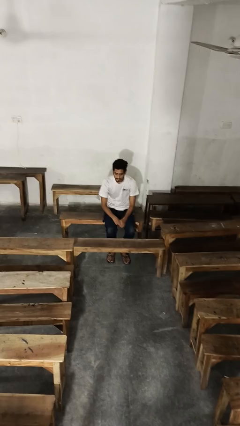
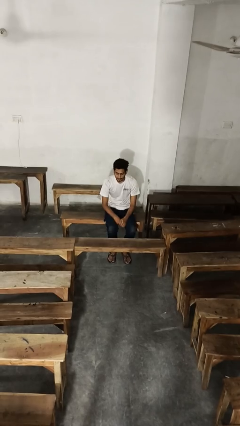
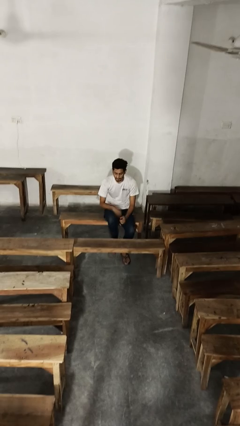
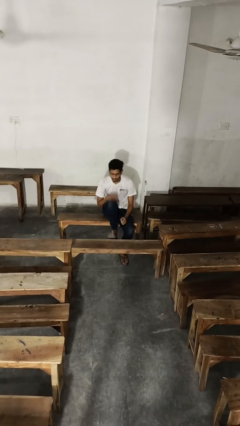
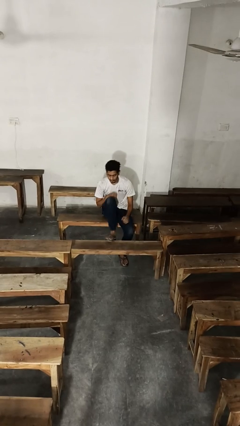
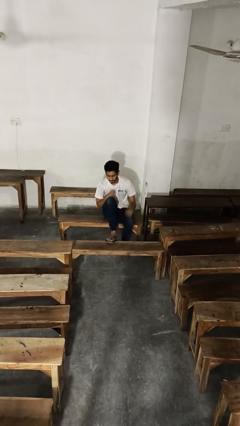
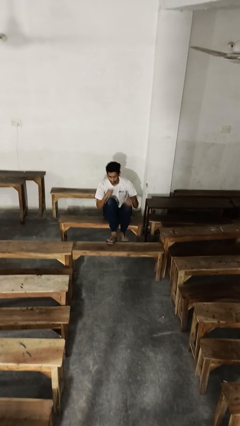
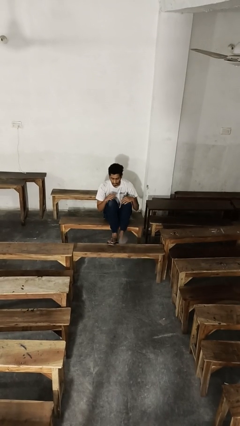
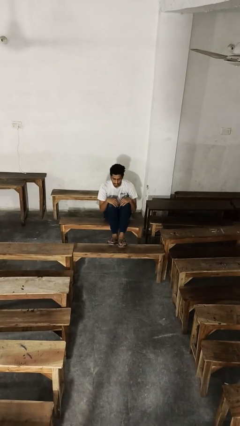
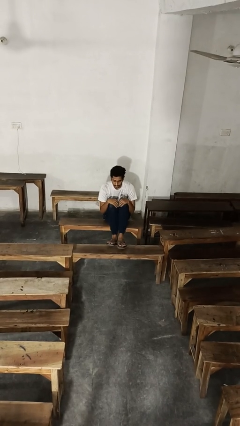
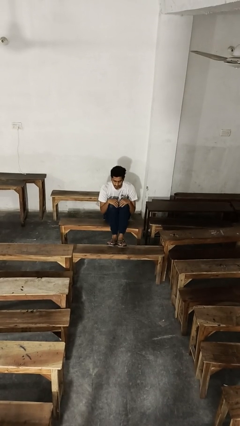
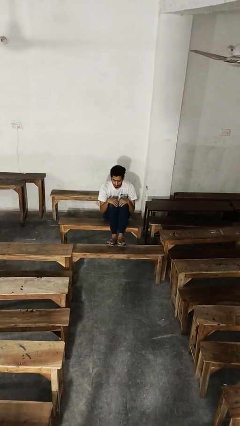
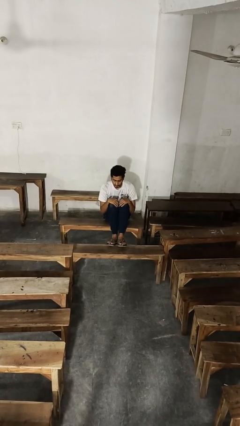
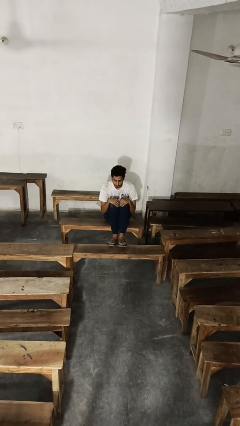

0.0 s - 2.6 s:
person puts feet up

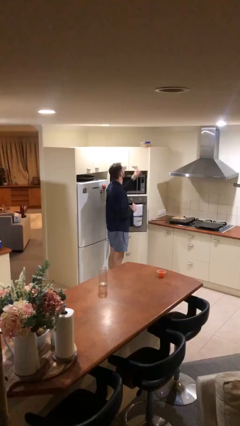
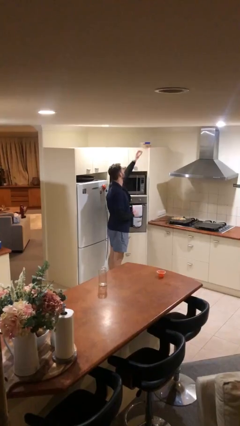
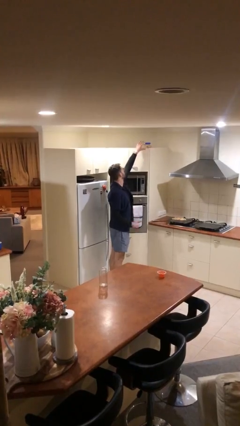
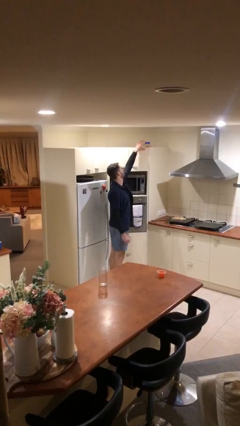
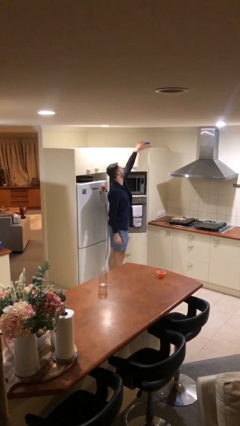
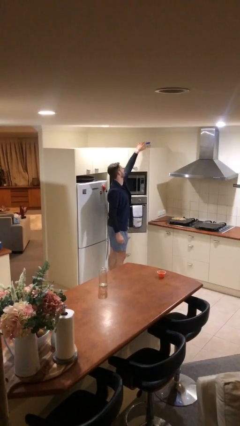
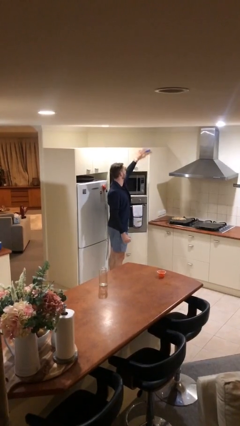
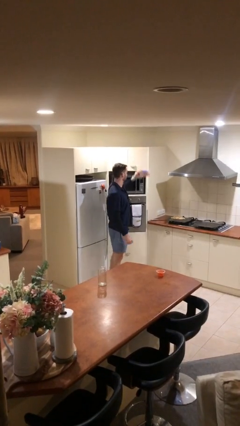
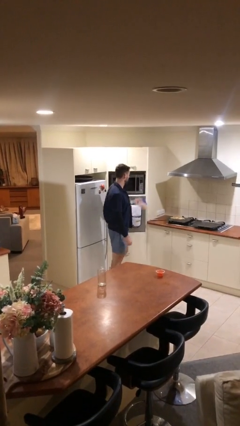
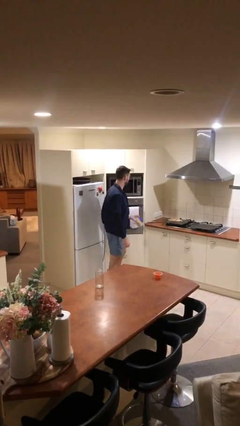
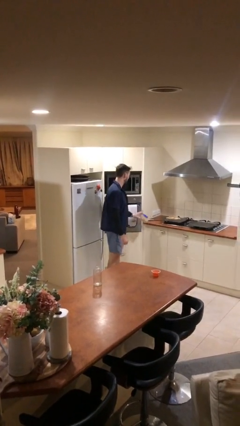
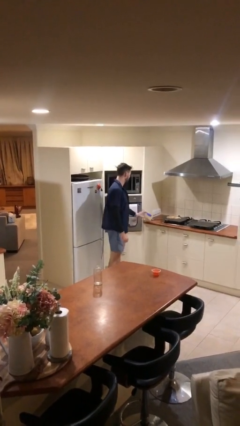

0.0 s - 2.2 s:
person picks up object from shelf

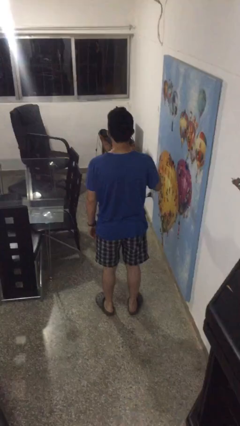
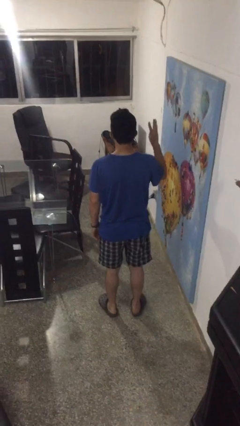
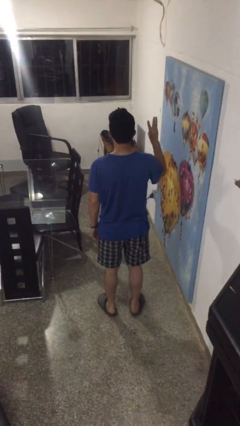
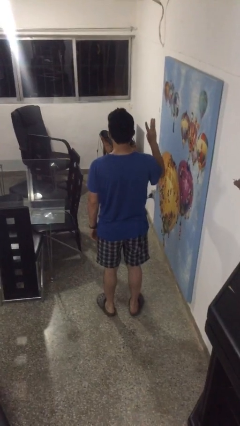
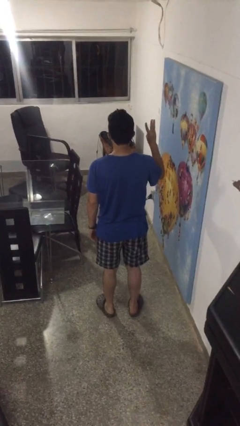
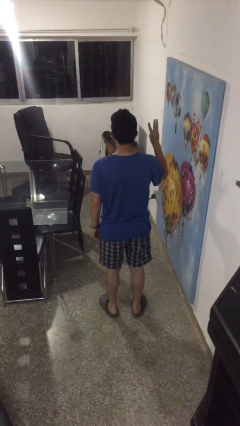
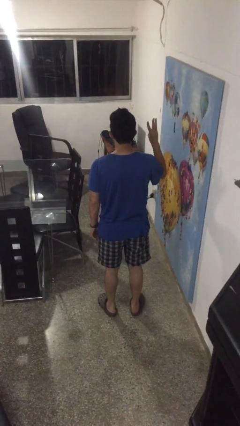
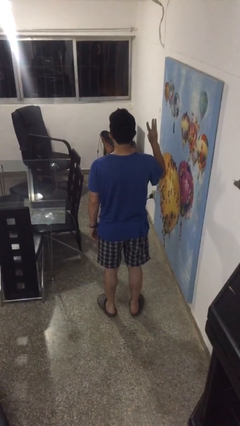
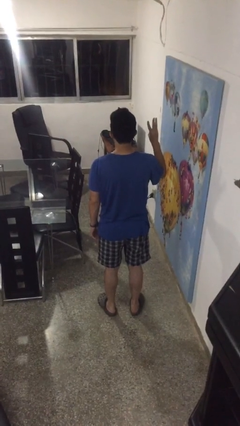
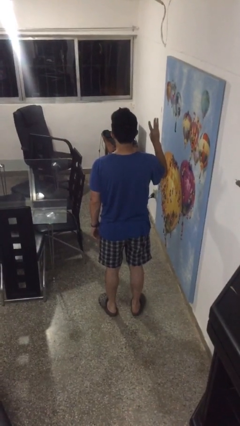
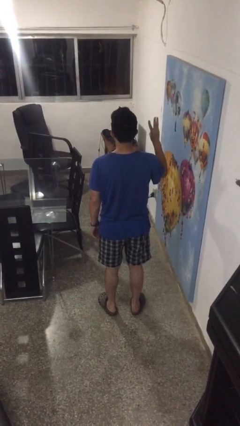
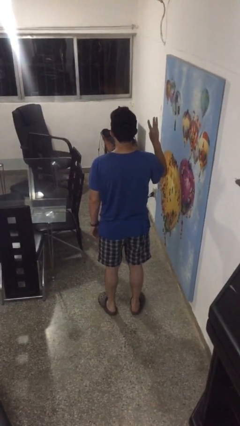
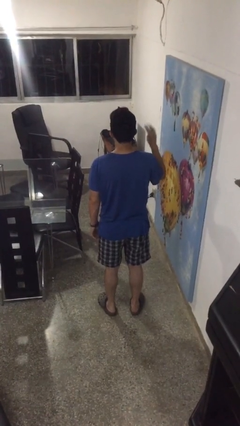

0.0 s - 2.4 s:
person gestures number three

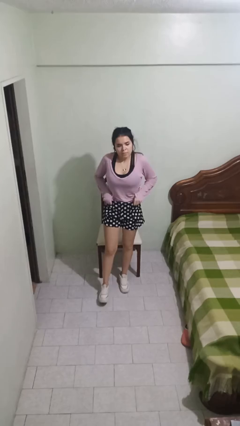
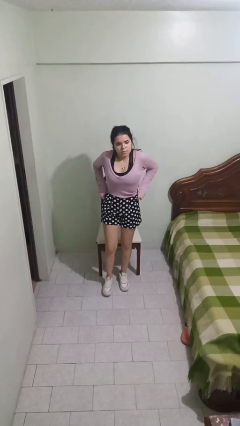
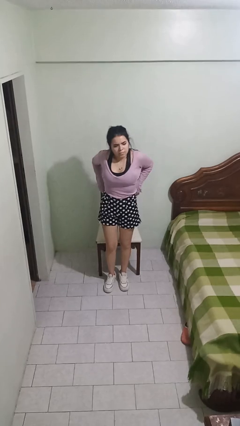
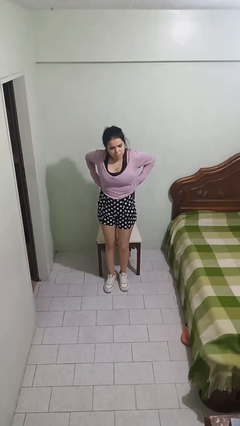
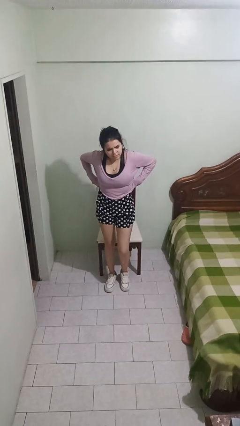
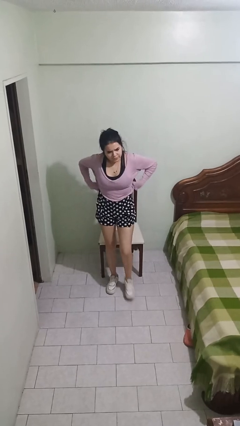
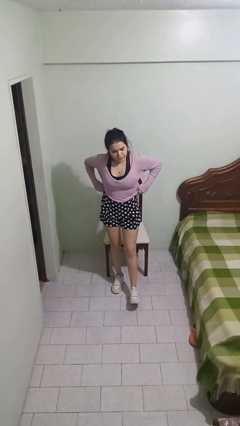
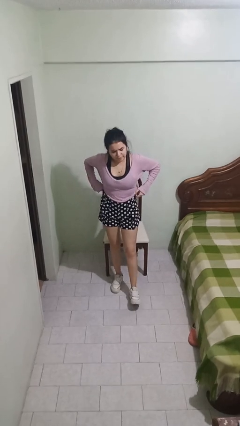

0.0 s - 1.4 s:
person hikes up pants

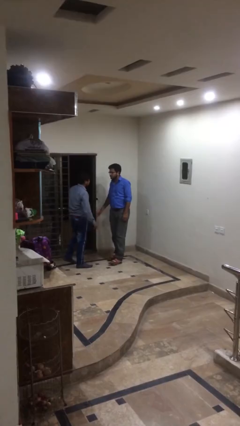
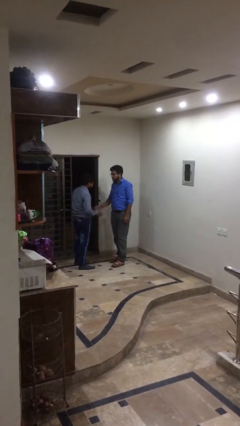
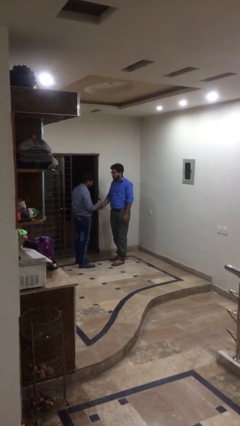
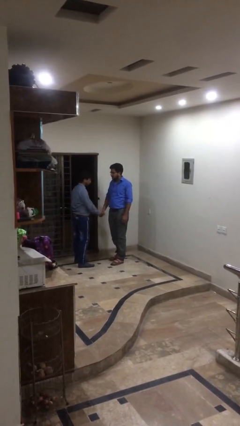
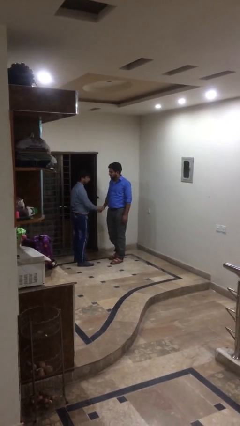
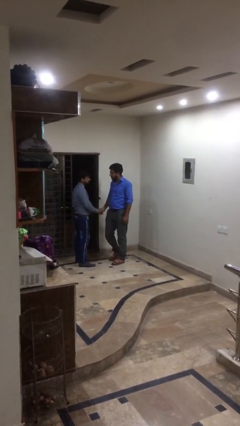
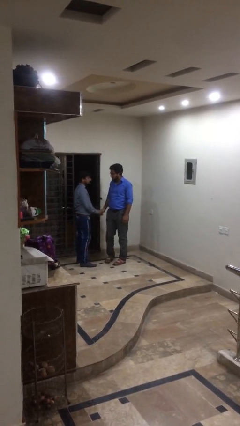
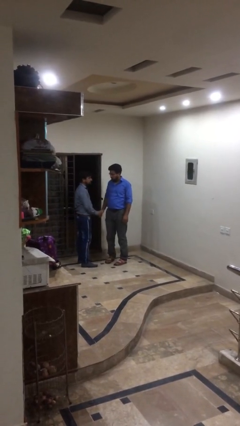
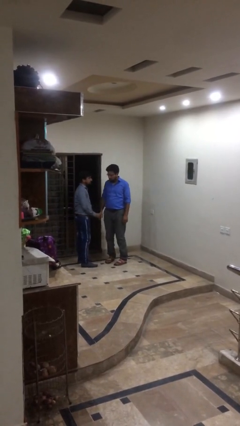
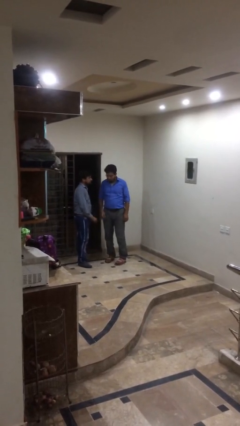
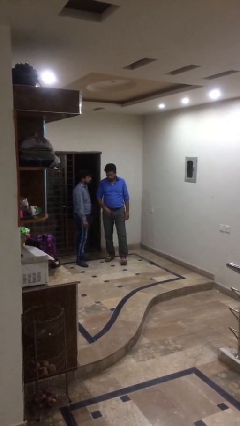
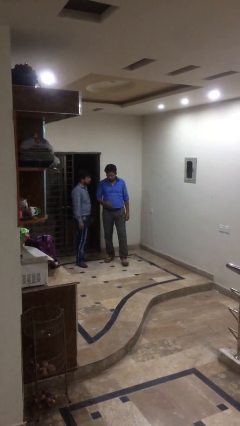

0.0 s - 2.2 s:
person shakes hand

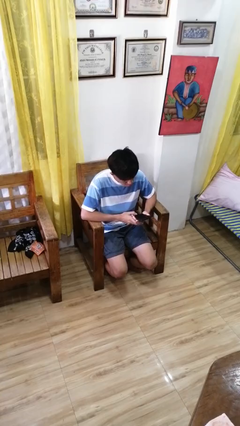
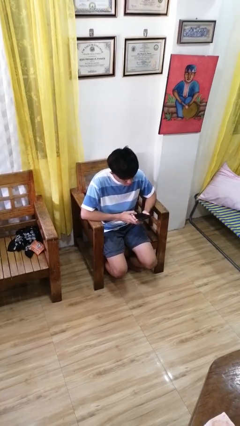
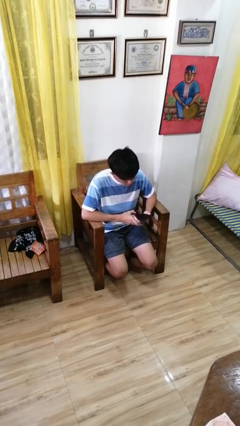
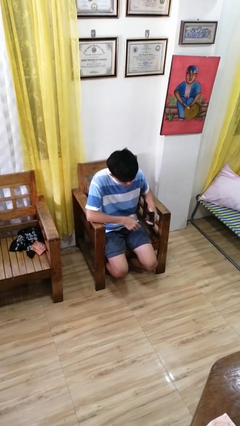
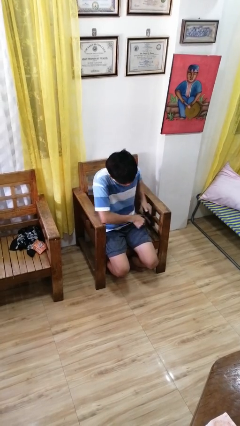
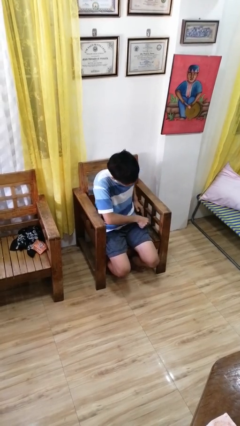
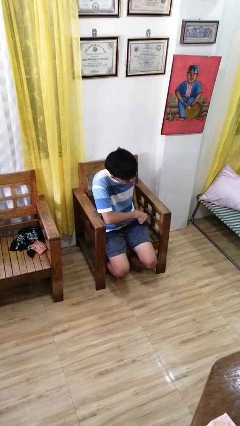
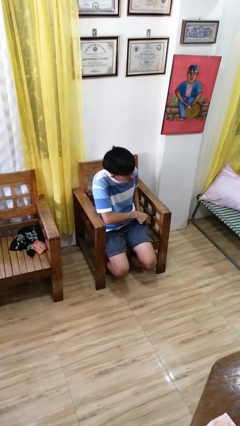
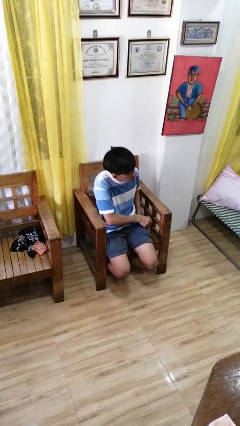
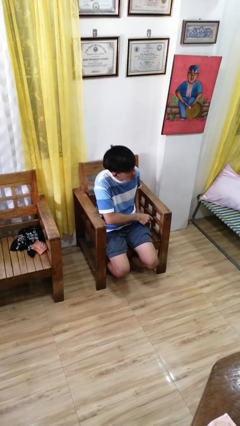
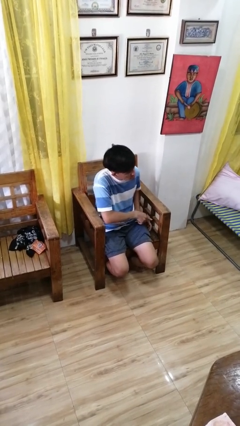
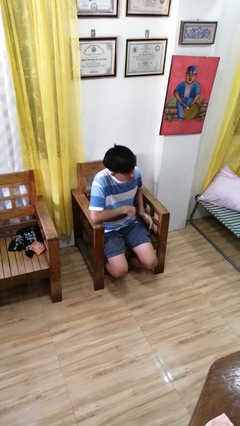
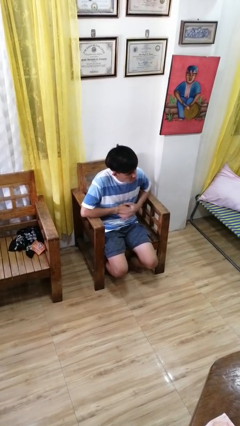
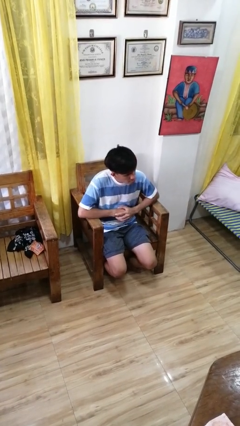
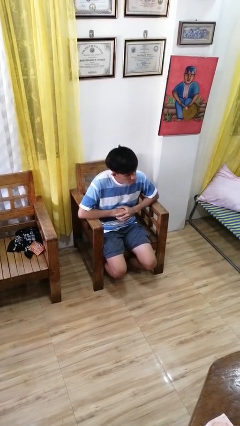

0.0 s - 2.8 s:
person puts phone into pocket

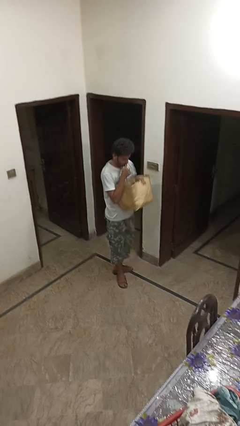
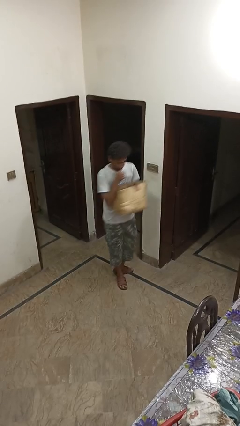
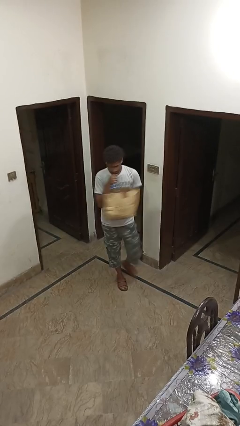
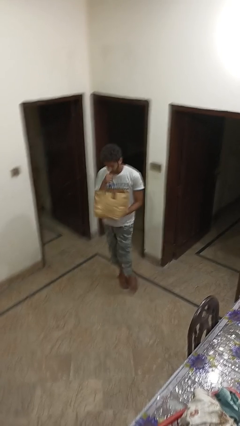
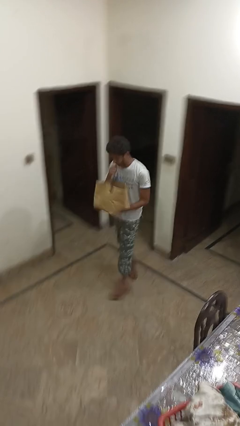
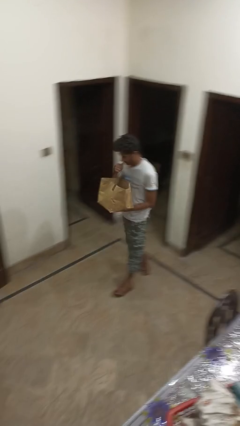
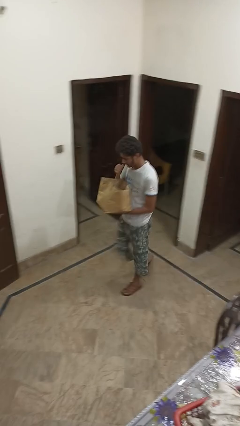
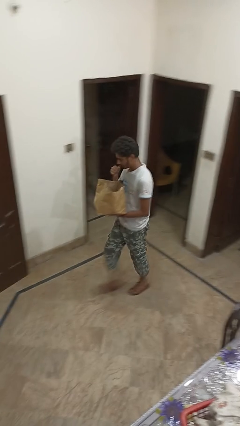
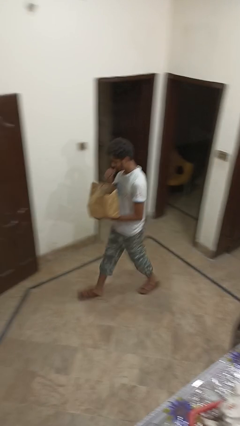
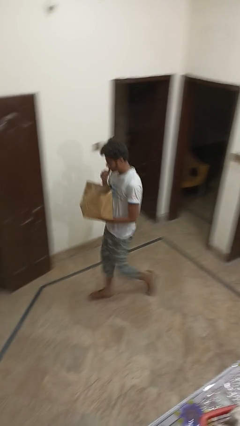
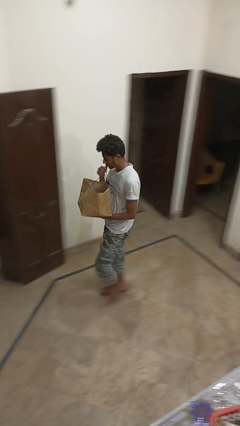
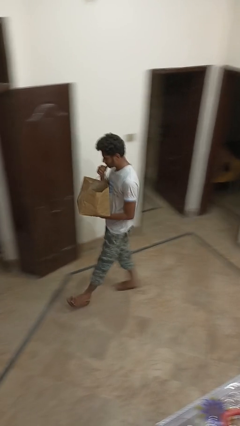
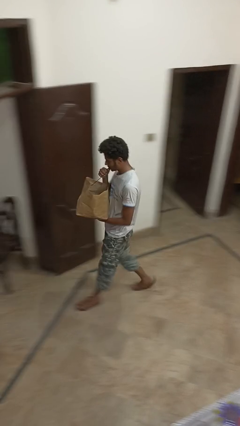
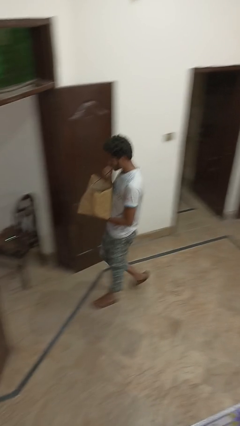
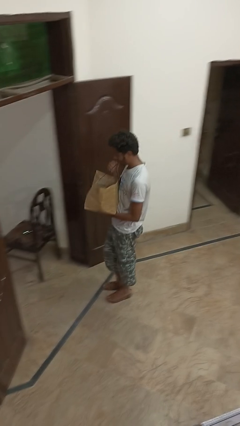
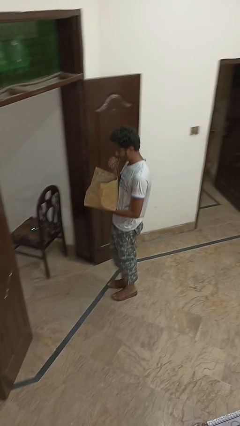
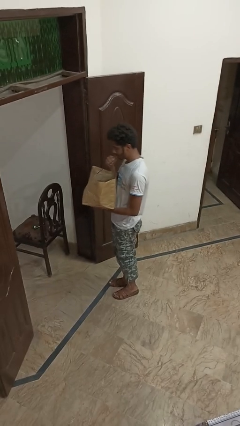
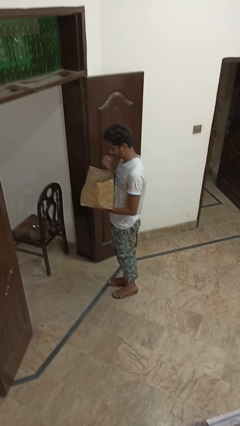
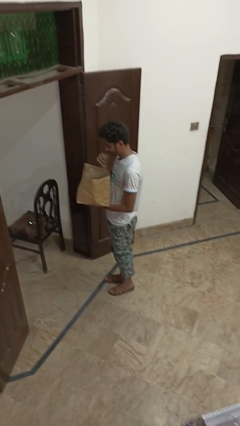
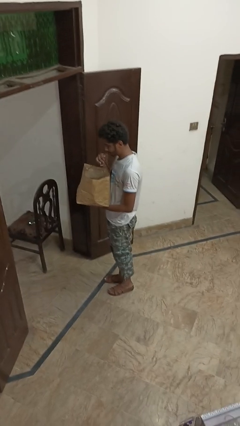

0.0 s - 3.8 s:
person carries groceries
